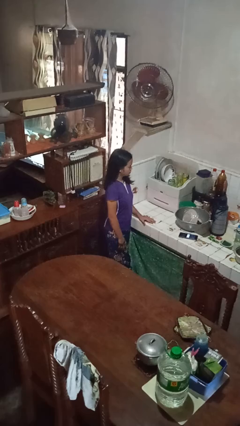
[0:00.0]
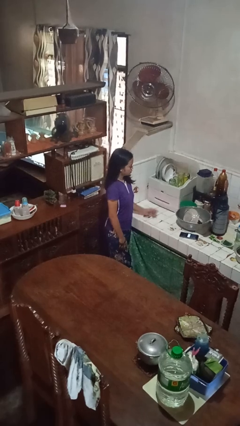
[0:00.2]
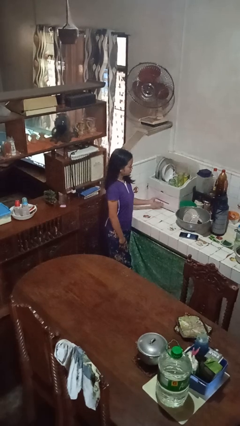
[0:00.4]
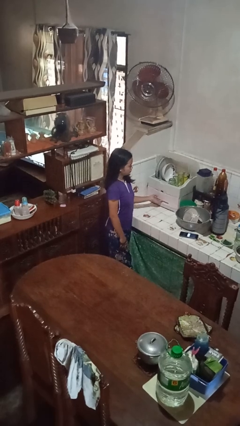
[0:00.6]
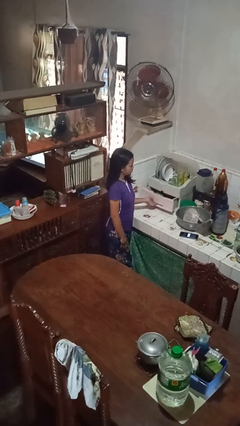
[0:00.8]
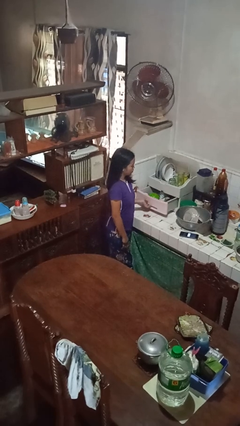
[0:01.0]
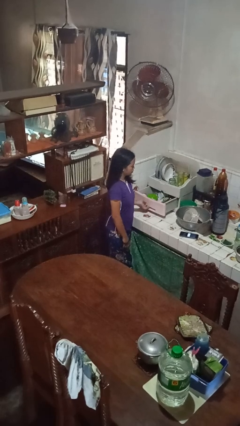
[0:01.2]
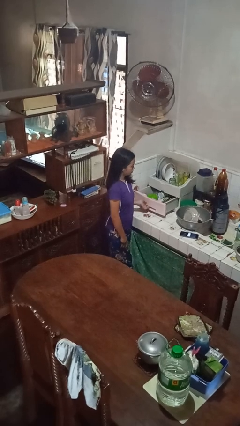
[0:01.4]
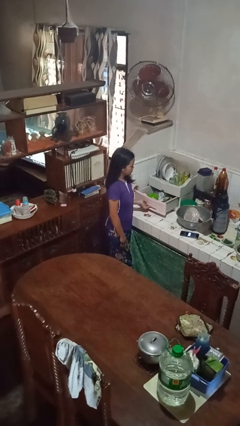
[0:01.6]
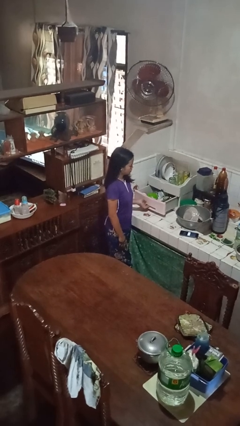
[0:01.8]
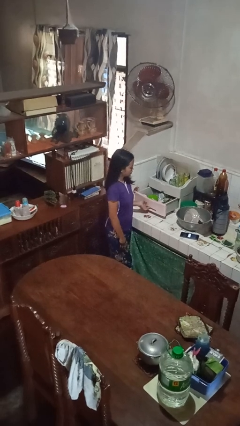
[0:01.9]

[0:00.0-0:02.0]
person opens kitchen drawer

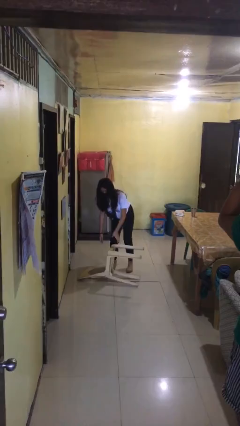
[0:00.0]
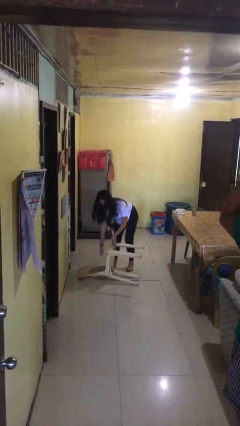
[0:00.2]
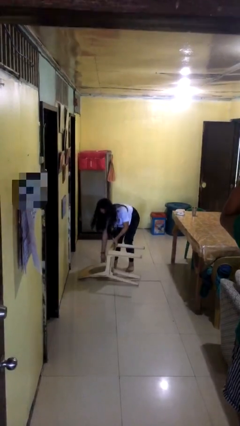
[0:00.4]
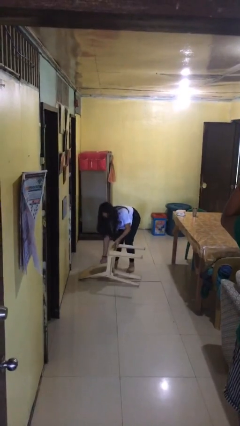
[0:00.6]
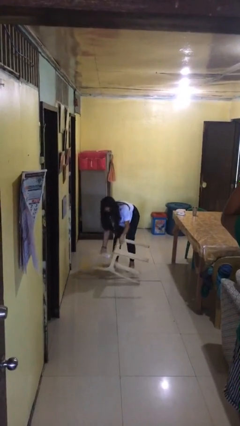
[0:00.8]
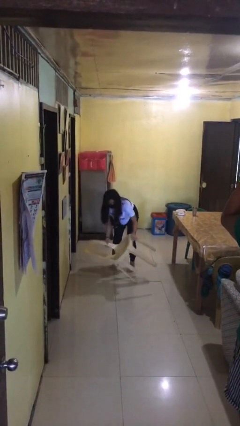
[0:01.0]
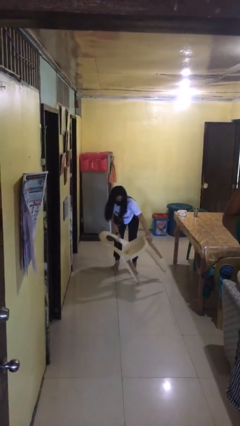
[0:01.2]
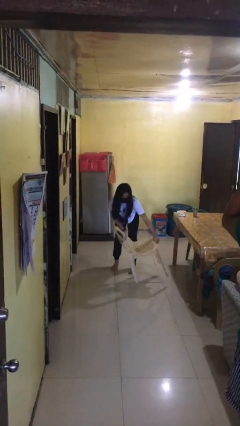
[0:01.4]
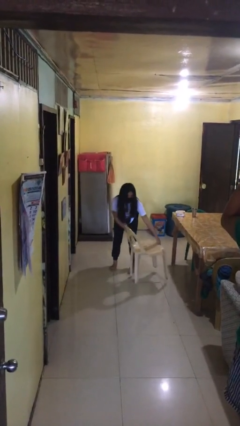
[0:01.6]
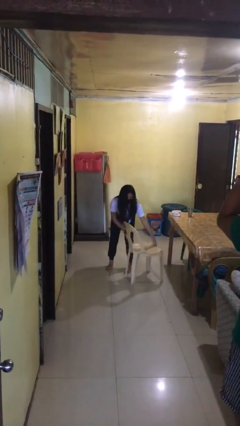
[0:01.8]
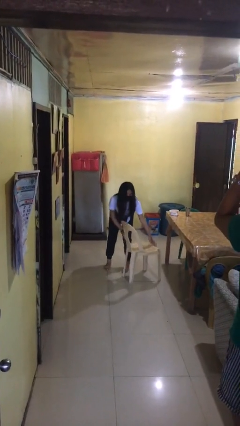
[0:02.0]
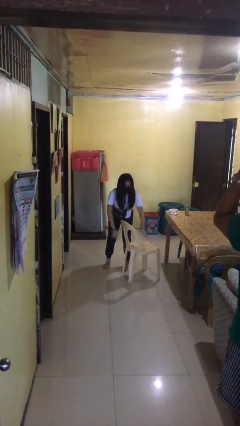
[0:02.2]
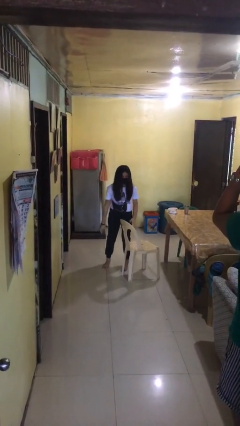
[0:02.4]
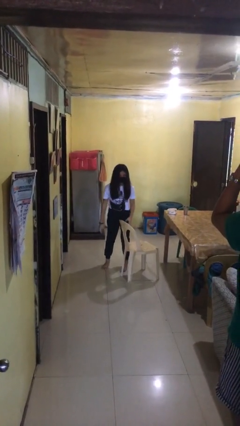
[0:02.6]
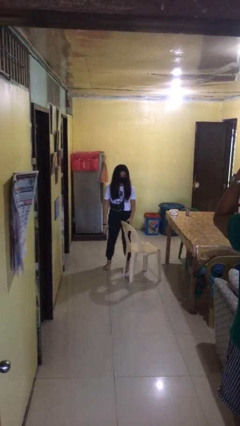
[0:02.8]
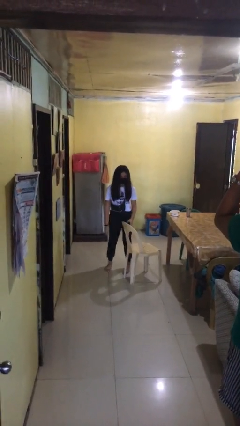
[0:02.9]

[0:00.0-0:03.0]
person sets upright furniture

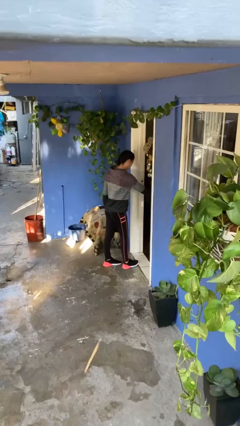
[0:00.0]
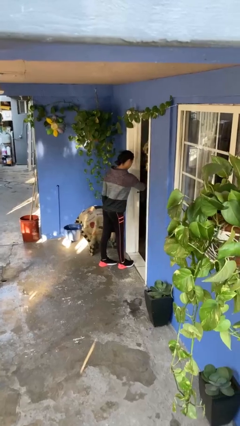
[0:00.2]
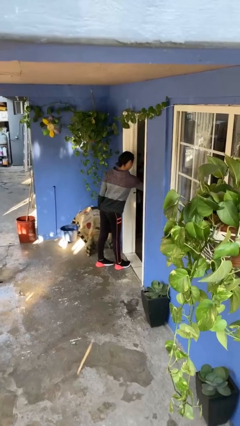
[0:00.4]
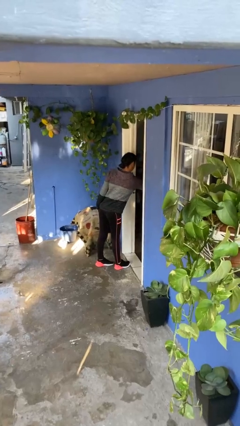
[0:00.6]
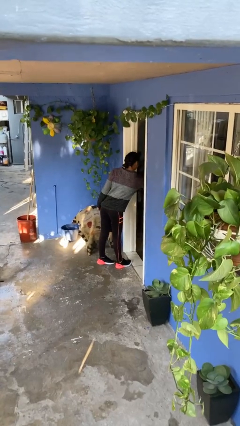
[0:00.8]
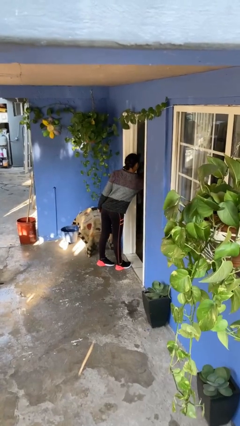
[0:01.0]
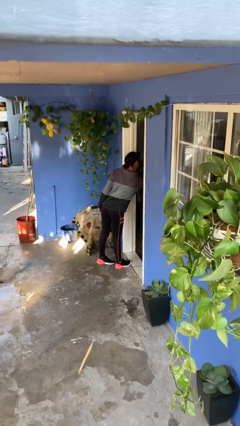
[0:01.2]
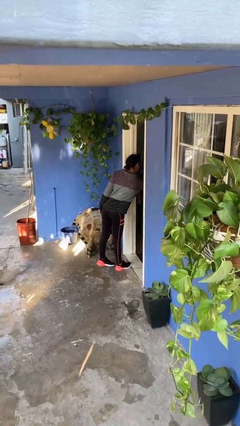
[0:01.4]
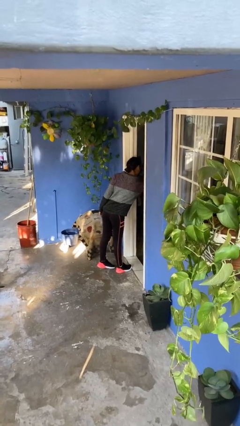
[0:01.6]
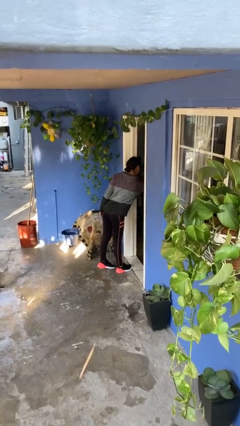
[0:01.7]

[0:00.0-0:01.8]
person opens facility door

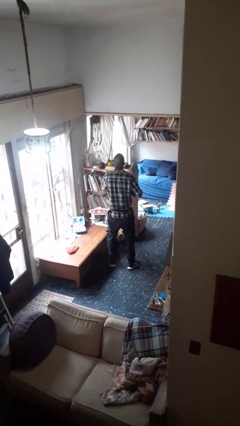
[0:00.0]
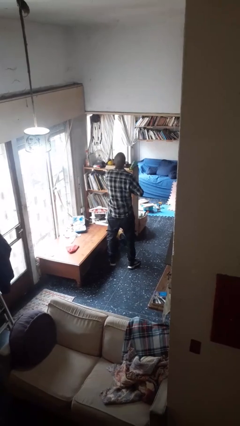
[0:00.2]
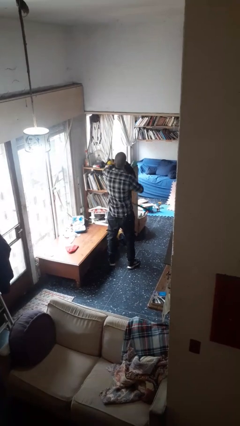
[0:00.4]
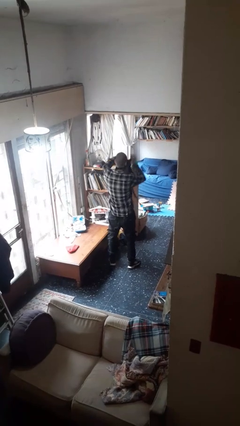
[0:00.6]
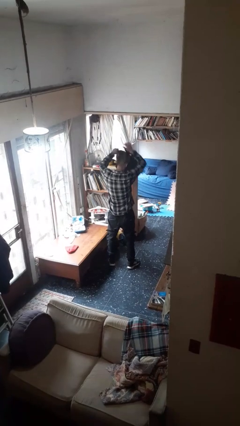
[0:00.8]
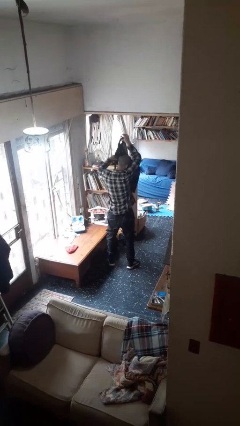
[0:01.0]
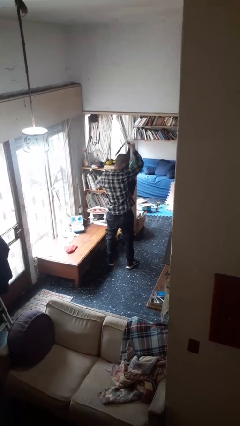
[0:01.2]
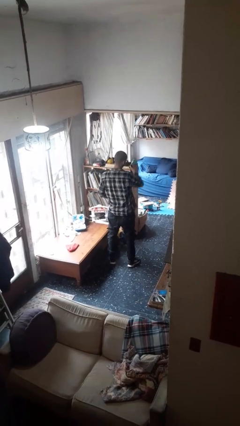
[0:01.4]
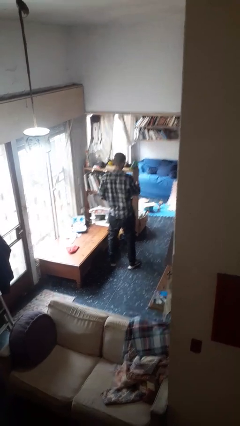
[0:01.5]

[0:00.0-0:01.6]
person takes off apron

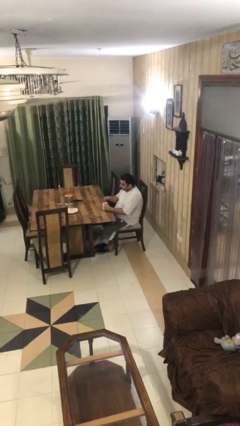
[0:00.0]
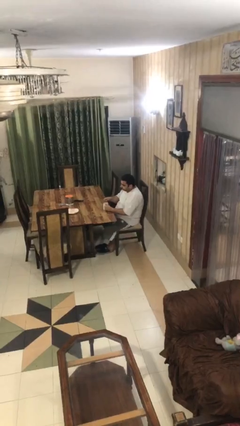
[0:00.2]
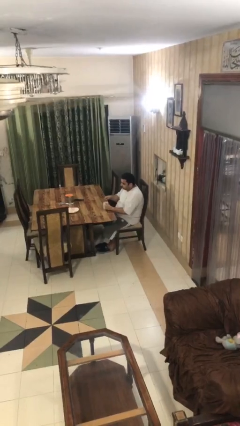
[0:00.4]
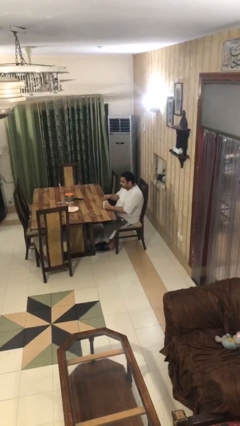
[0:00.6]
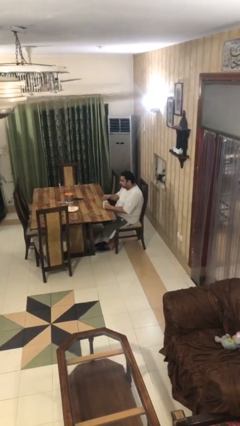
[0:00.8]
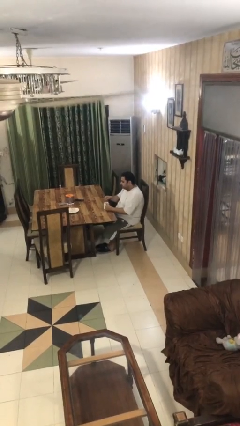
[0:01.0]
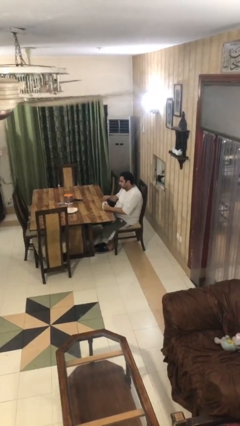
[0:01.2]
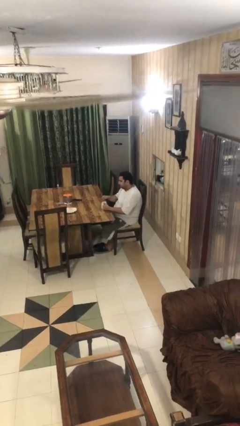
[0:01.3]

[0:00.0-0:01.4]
person stirs mug

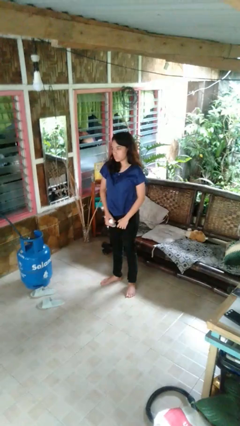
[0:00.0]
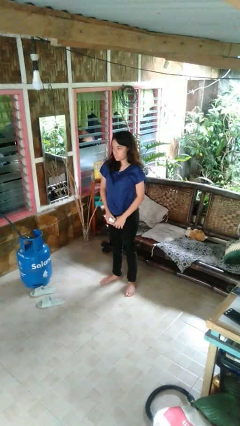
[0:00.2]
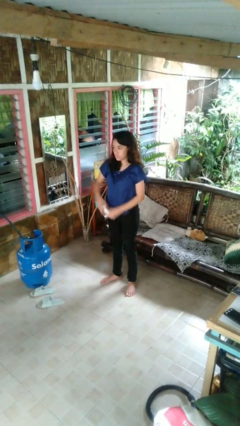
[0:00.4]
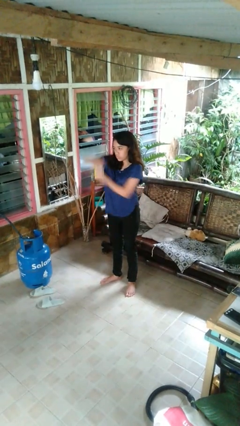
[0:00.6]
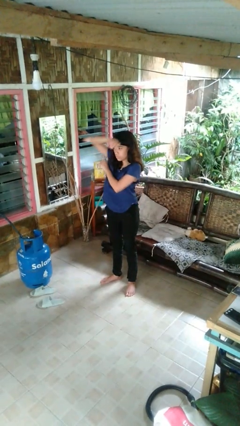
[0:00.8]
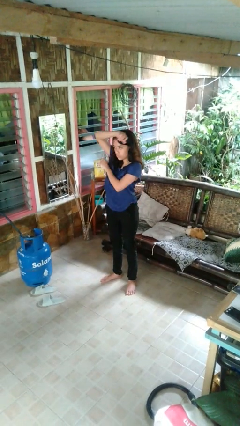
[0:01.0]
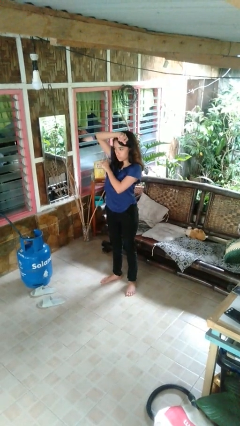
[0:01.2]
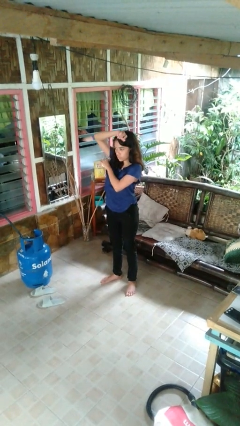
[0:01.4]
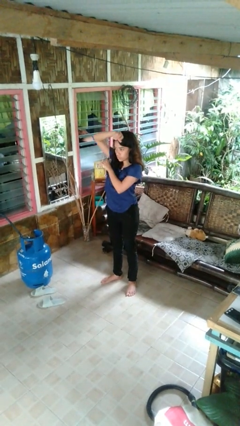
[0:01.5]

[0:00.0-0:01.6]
person applies deodorant

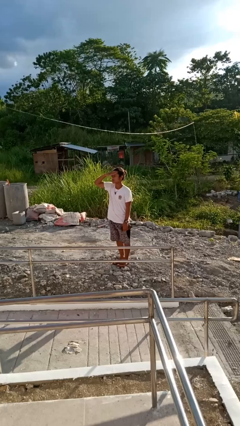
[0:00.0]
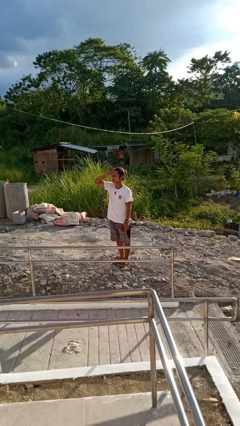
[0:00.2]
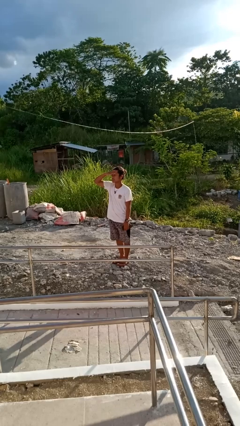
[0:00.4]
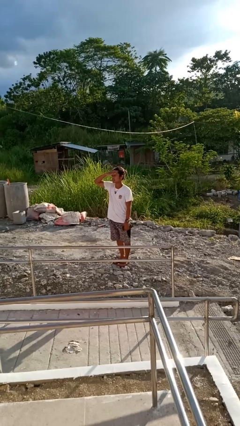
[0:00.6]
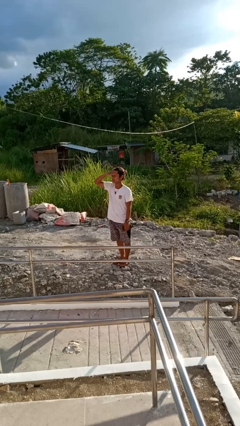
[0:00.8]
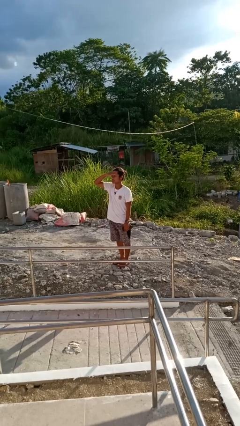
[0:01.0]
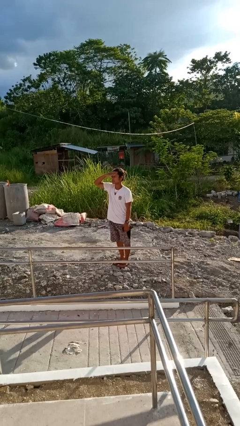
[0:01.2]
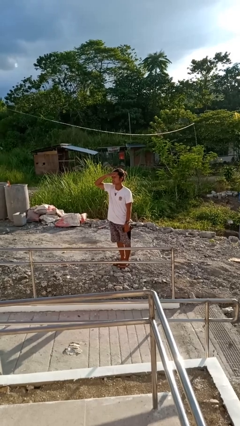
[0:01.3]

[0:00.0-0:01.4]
person shades eyes

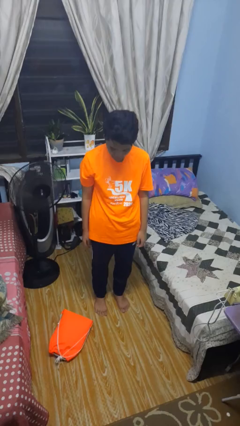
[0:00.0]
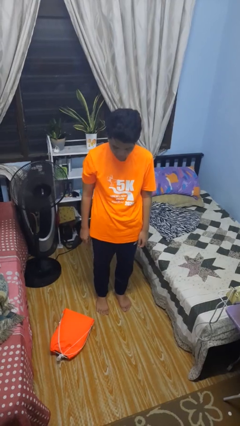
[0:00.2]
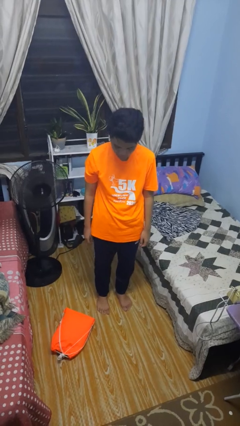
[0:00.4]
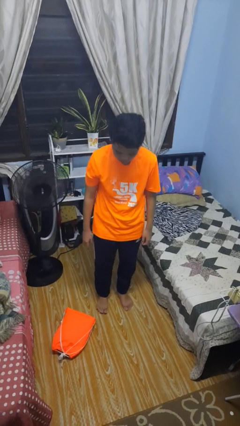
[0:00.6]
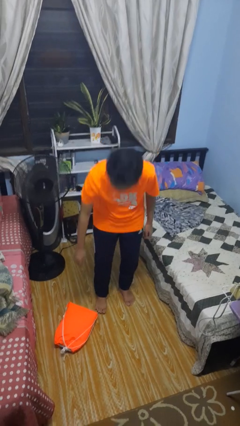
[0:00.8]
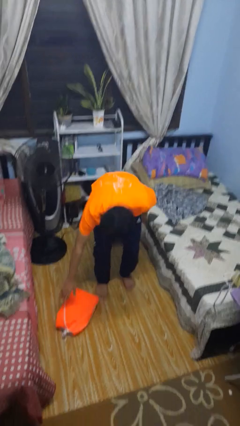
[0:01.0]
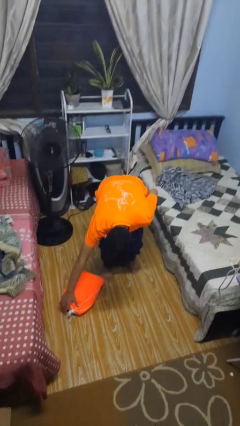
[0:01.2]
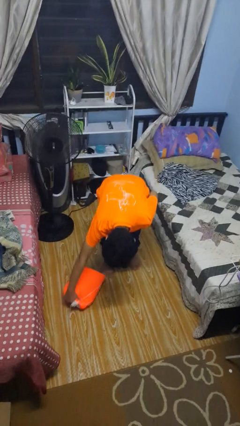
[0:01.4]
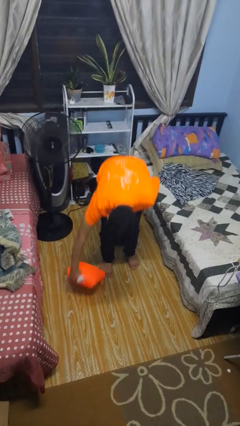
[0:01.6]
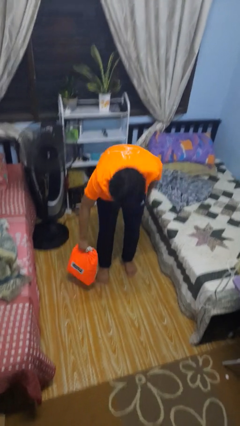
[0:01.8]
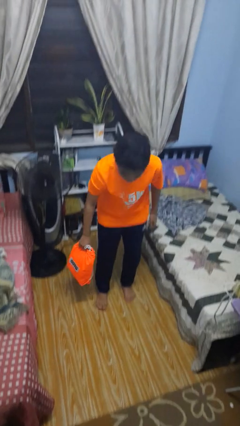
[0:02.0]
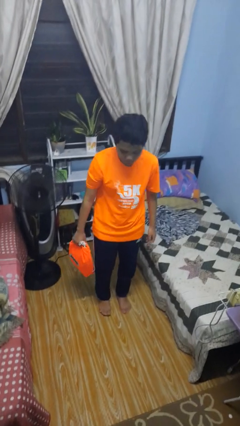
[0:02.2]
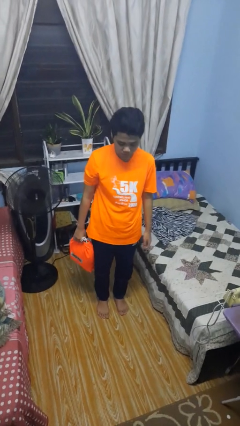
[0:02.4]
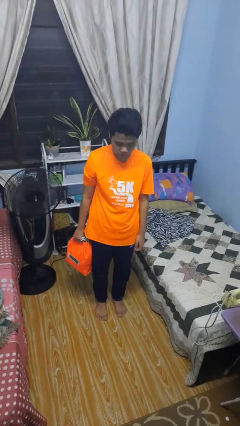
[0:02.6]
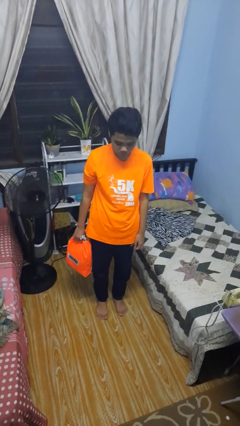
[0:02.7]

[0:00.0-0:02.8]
person picks up object from floor

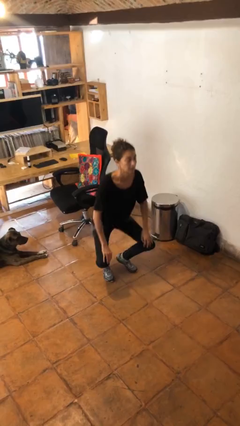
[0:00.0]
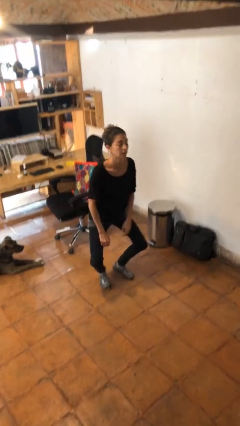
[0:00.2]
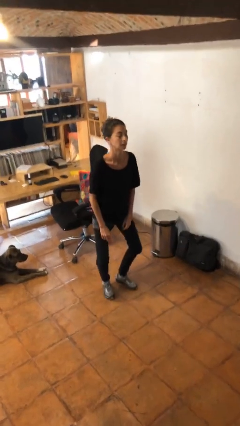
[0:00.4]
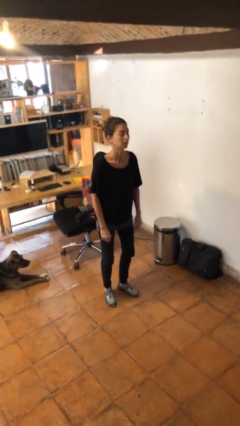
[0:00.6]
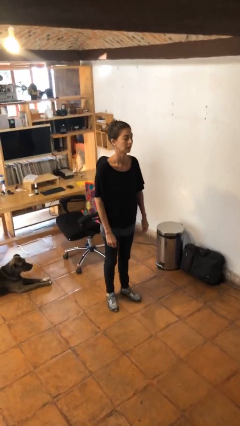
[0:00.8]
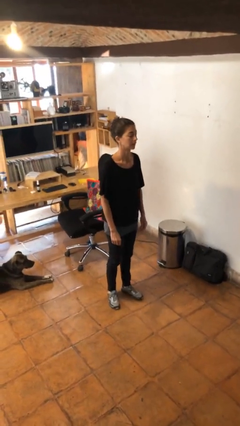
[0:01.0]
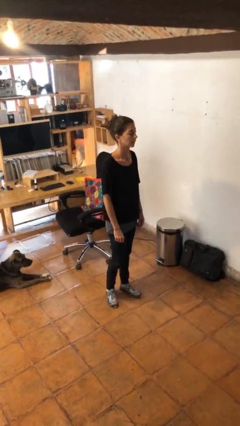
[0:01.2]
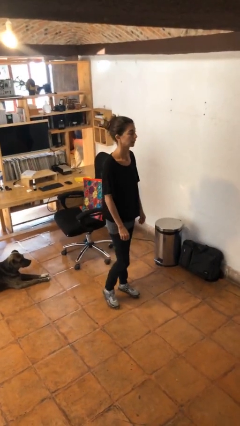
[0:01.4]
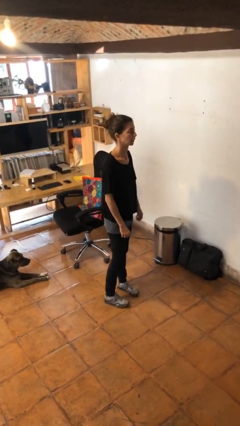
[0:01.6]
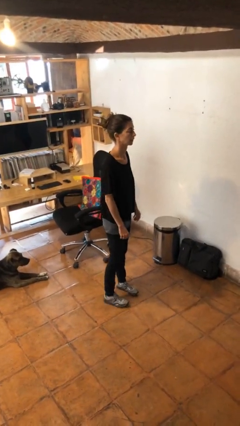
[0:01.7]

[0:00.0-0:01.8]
person stands up
